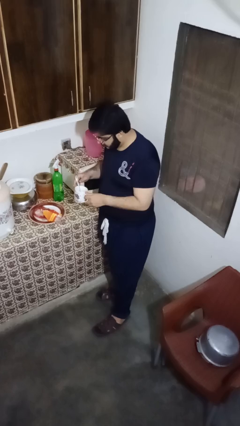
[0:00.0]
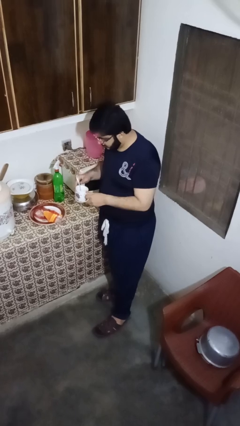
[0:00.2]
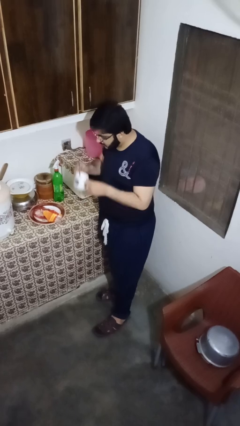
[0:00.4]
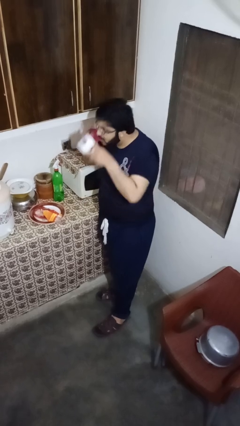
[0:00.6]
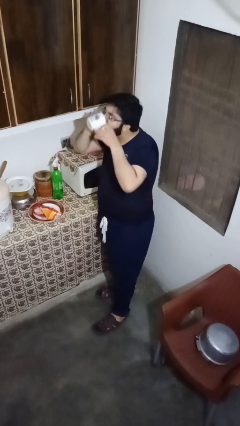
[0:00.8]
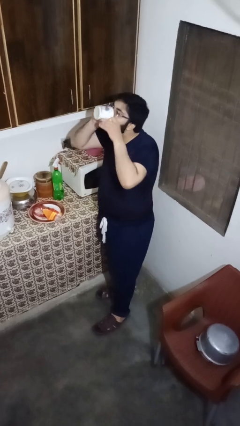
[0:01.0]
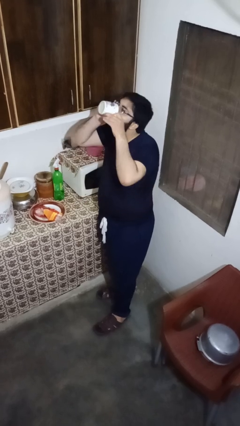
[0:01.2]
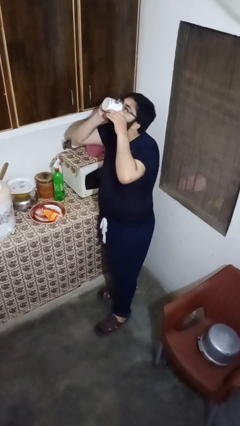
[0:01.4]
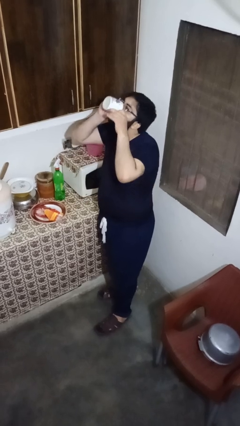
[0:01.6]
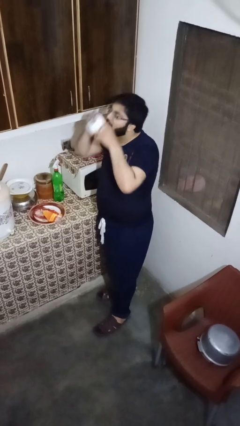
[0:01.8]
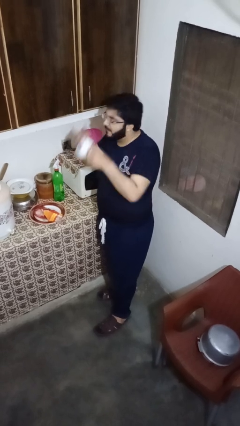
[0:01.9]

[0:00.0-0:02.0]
person drinks from mug

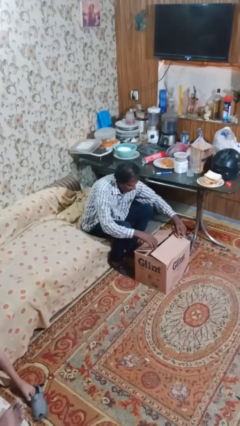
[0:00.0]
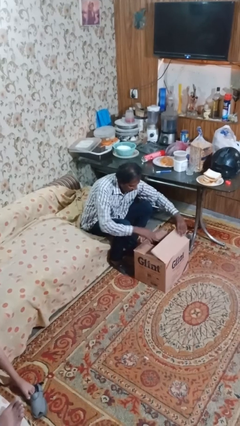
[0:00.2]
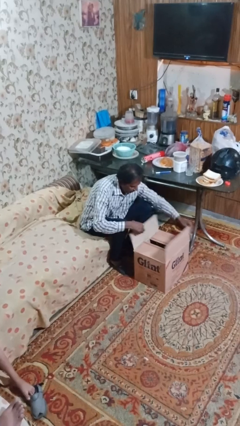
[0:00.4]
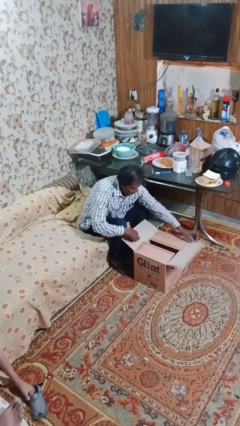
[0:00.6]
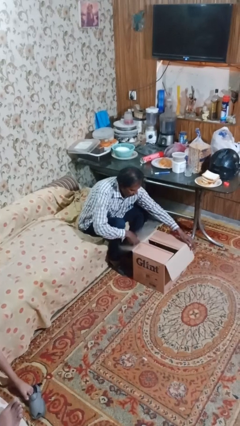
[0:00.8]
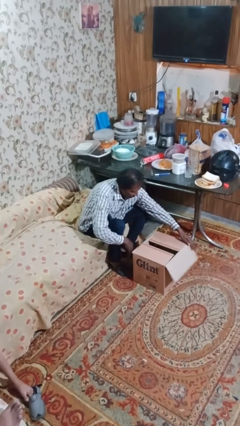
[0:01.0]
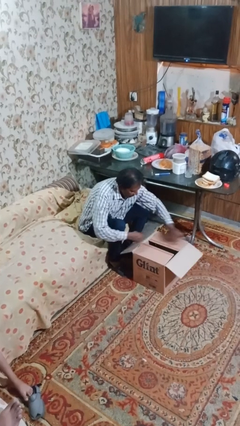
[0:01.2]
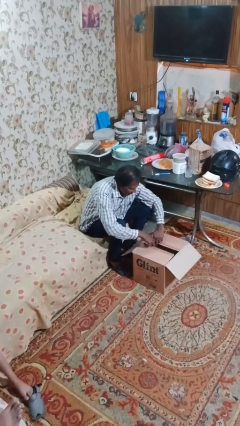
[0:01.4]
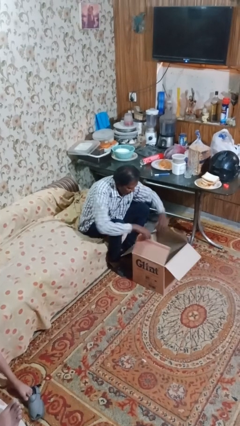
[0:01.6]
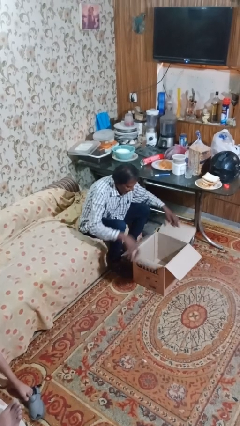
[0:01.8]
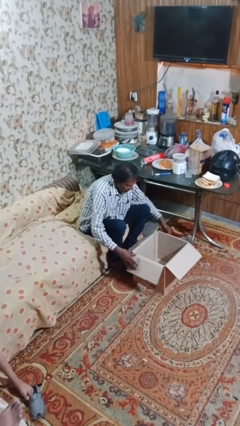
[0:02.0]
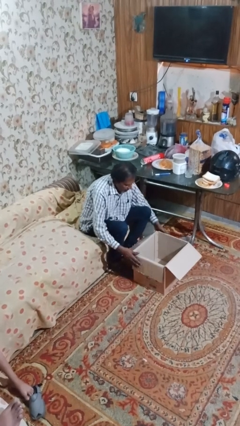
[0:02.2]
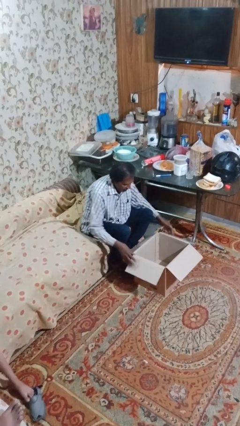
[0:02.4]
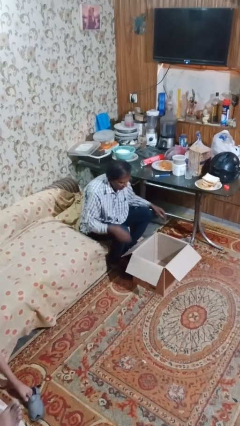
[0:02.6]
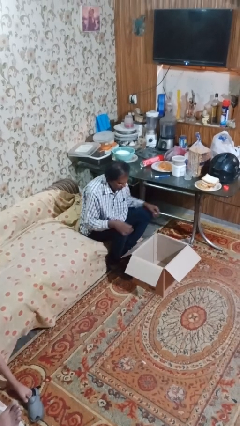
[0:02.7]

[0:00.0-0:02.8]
person opens box

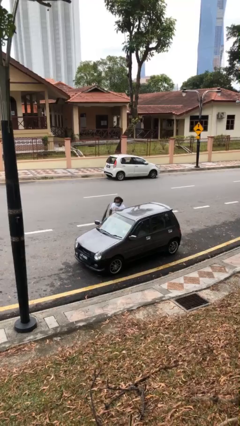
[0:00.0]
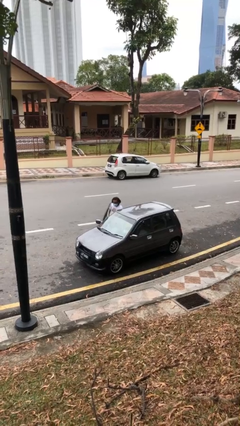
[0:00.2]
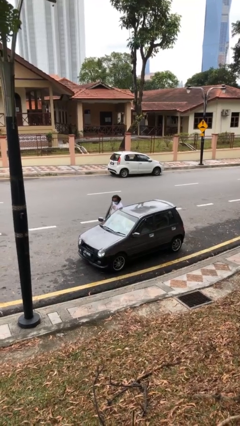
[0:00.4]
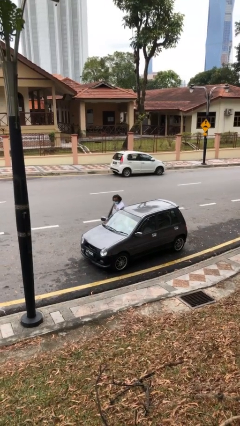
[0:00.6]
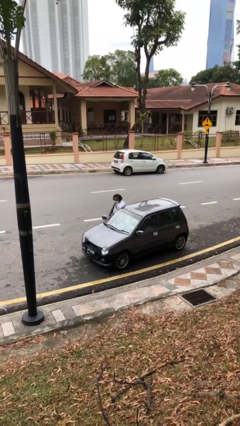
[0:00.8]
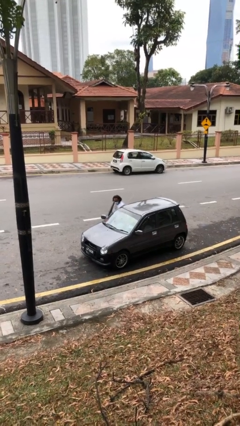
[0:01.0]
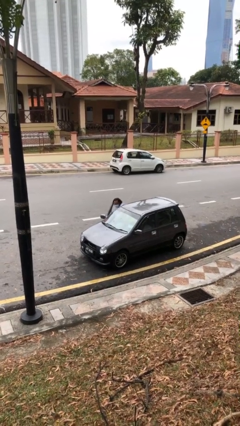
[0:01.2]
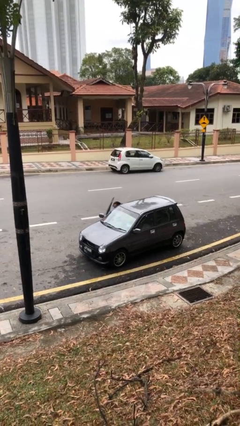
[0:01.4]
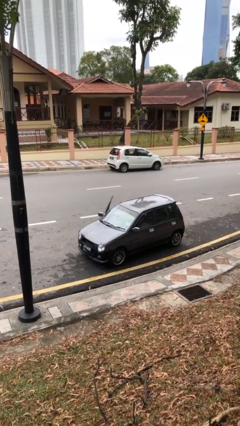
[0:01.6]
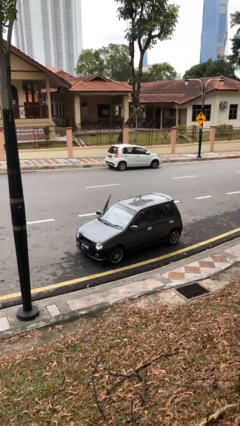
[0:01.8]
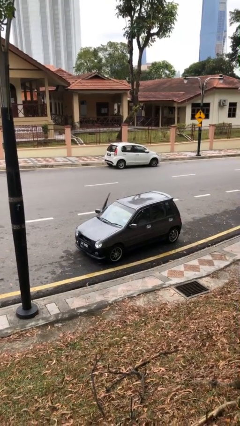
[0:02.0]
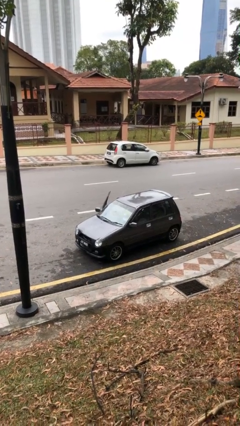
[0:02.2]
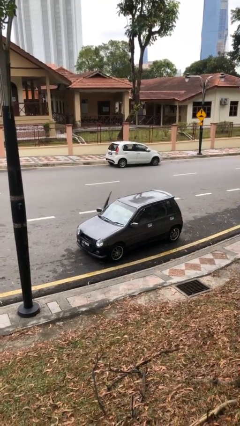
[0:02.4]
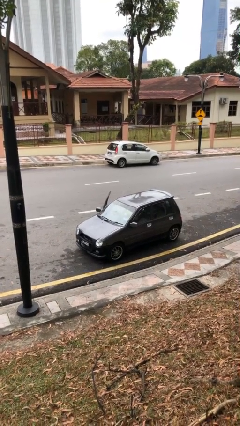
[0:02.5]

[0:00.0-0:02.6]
person enters car

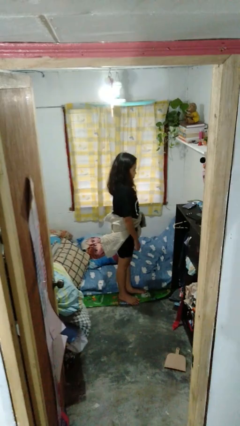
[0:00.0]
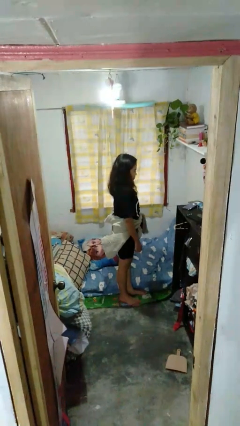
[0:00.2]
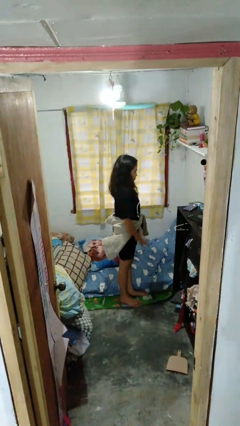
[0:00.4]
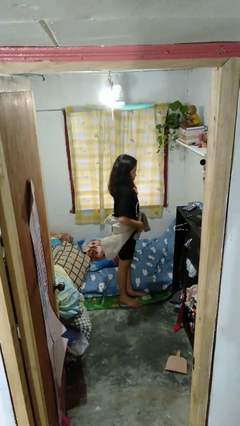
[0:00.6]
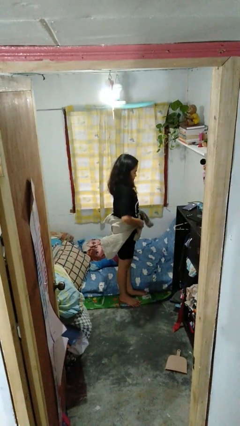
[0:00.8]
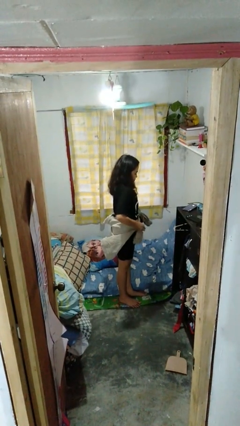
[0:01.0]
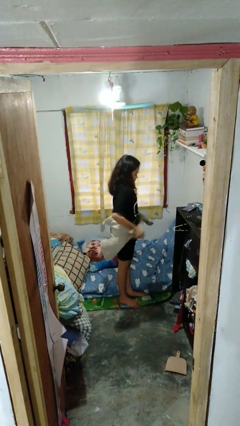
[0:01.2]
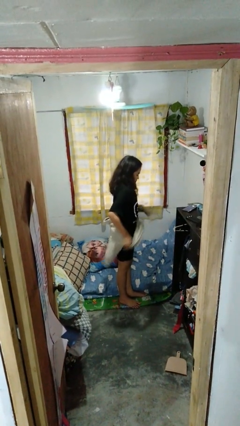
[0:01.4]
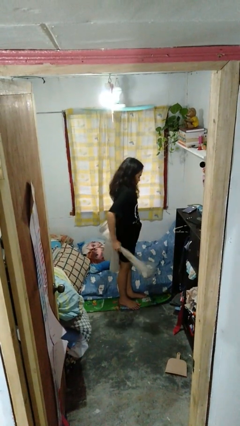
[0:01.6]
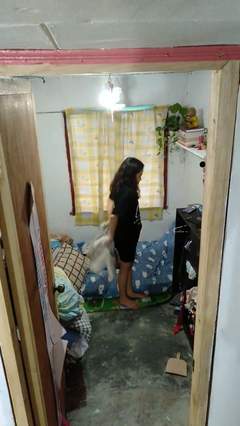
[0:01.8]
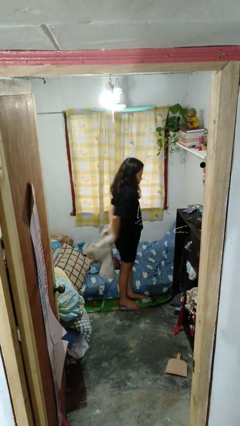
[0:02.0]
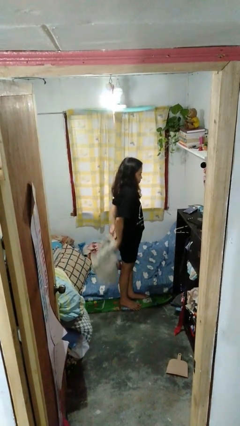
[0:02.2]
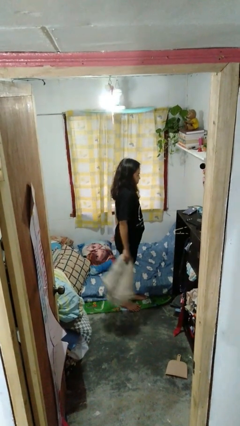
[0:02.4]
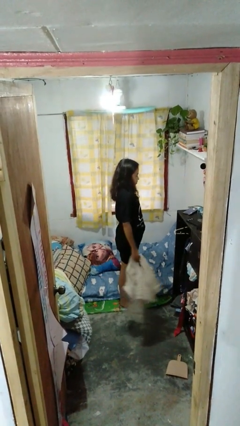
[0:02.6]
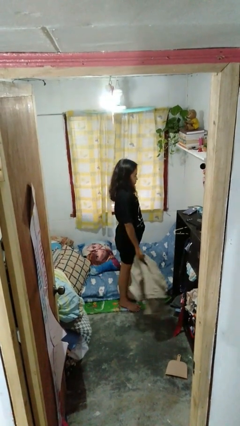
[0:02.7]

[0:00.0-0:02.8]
person unties jacket around waist

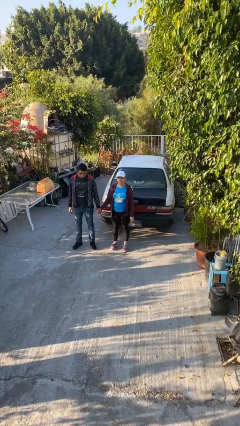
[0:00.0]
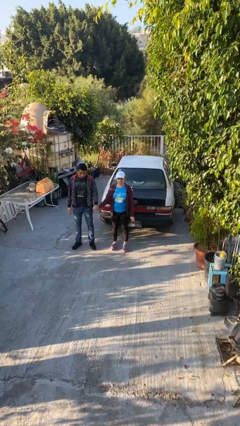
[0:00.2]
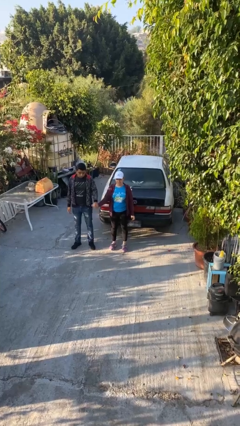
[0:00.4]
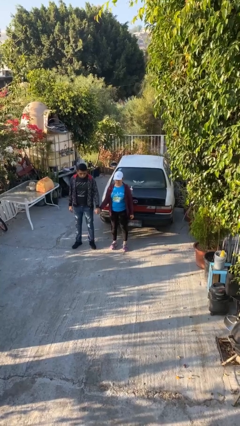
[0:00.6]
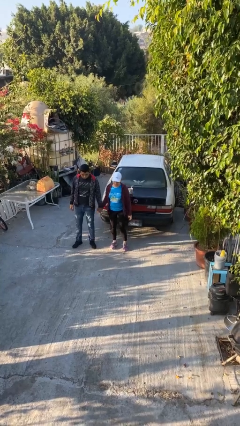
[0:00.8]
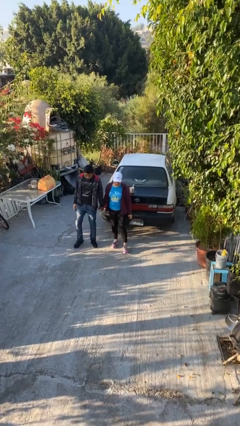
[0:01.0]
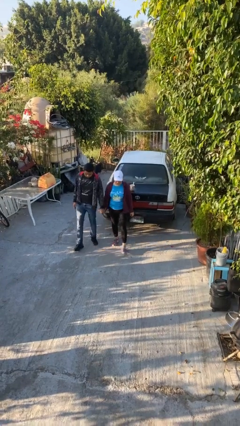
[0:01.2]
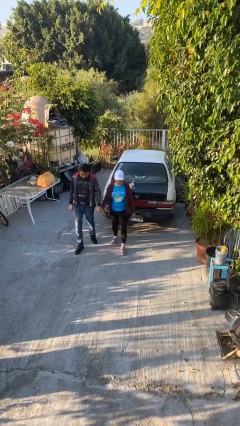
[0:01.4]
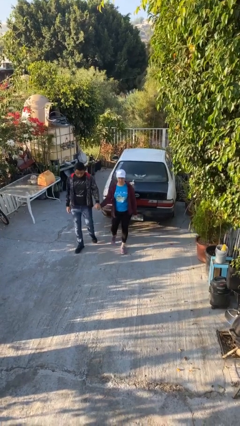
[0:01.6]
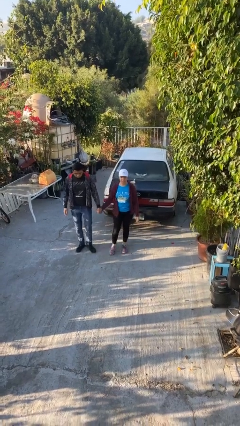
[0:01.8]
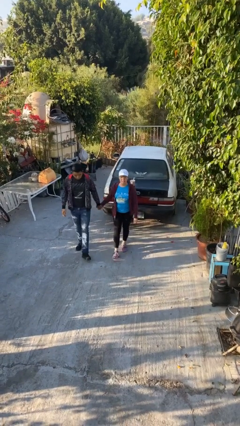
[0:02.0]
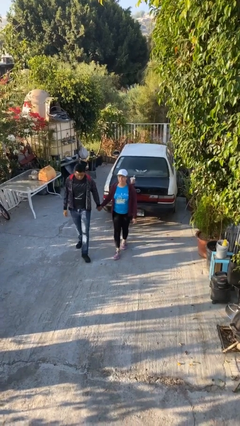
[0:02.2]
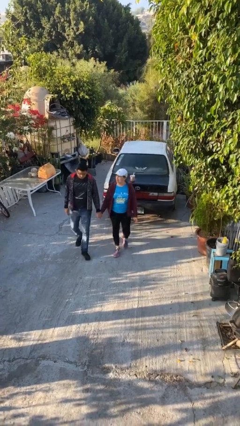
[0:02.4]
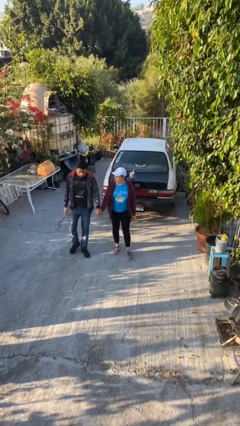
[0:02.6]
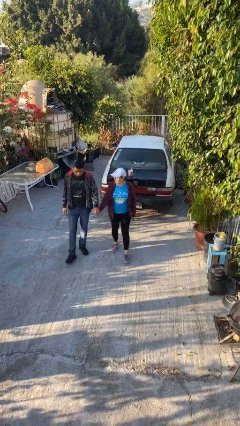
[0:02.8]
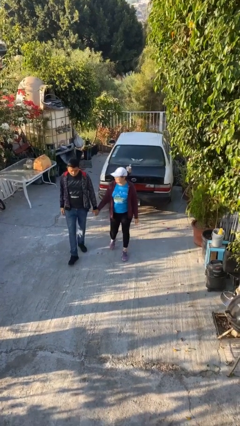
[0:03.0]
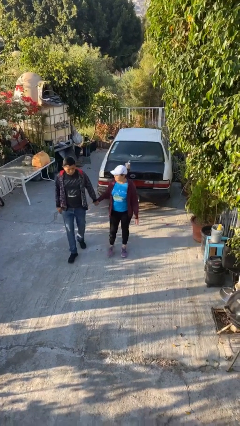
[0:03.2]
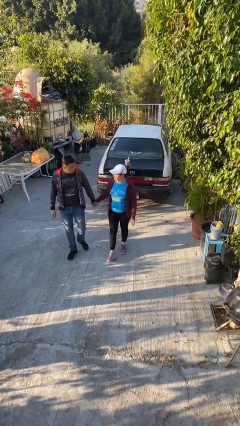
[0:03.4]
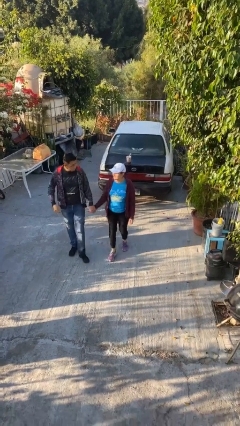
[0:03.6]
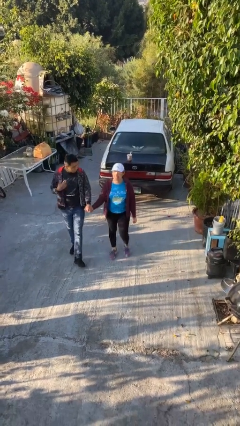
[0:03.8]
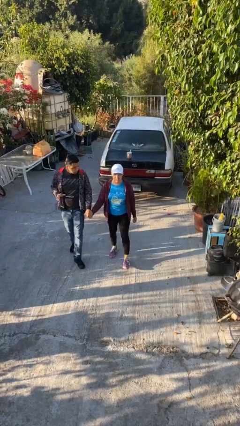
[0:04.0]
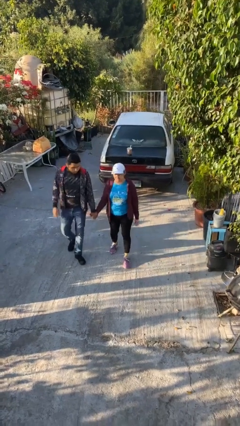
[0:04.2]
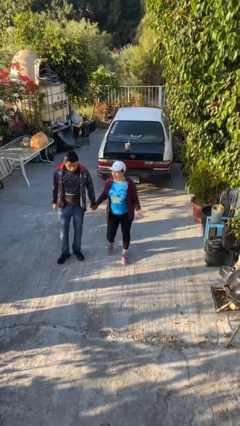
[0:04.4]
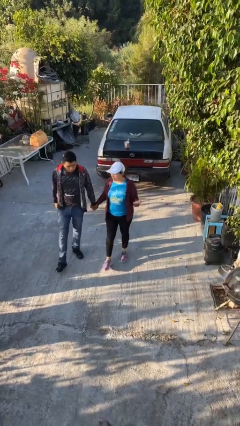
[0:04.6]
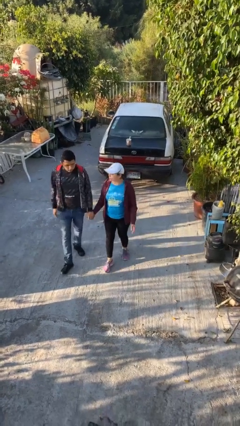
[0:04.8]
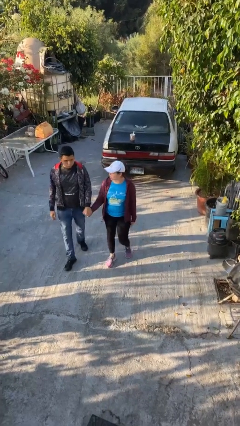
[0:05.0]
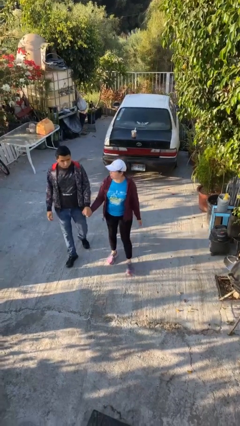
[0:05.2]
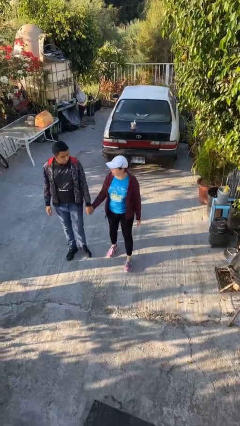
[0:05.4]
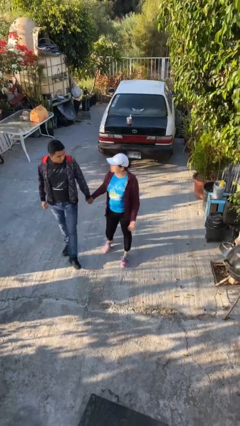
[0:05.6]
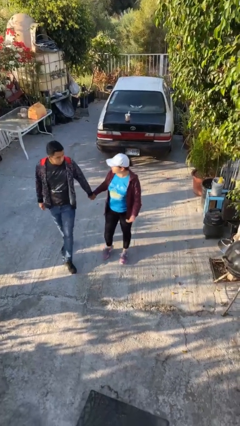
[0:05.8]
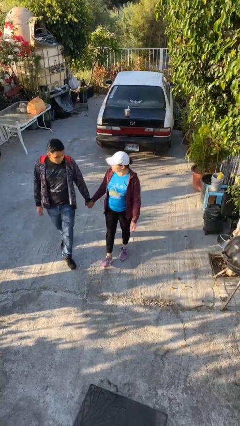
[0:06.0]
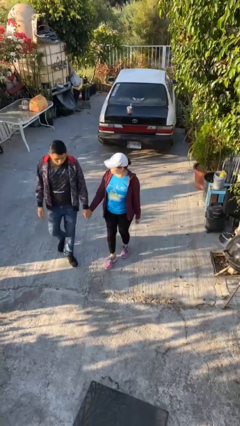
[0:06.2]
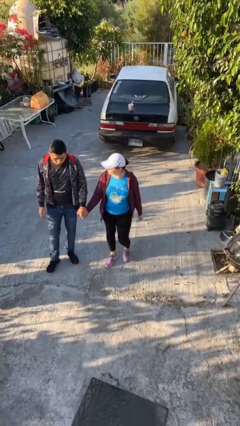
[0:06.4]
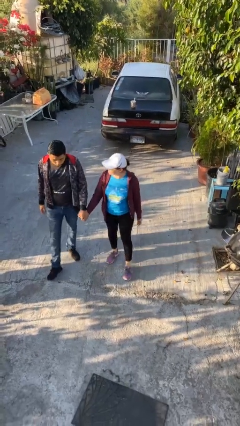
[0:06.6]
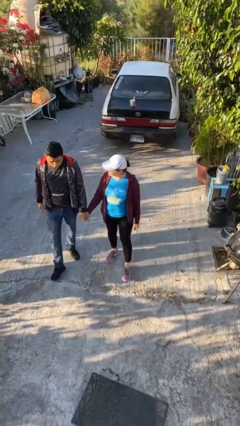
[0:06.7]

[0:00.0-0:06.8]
person holds hand

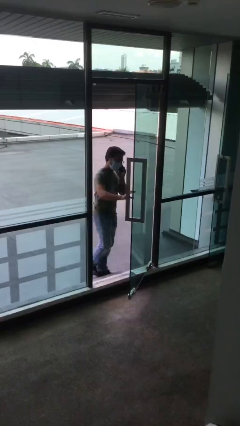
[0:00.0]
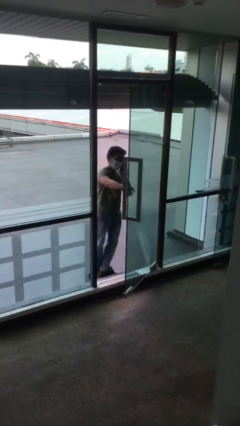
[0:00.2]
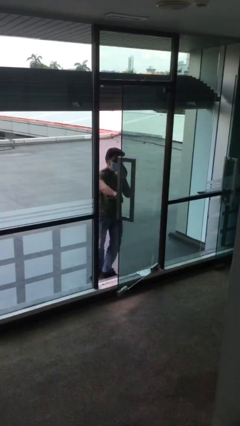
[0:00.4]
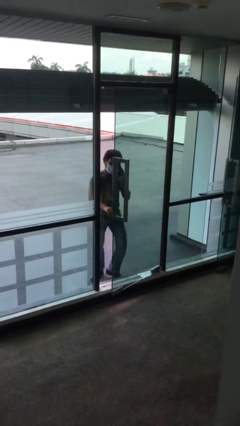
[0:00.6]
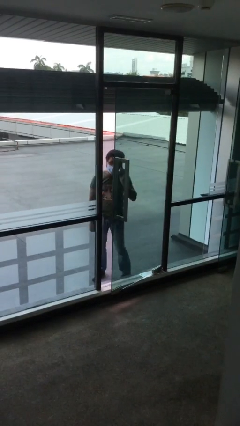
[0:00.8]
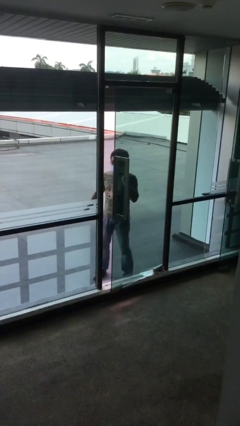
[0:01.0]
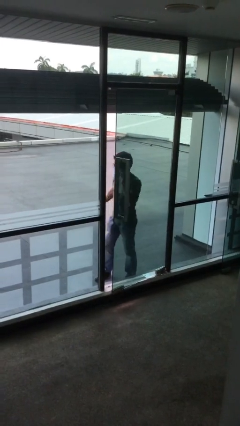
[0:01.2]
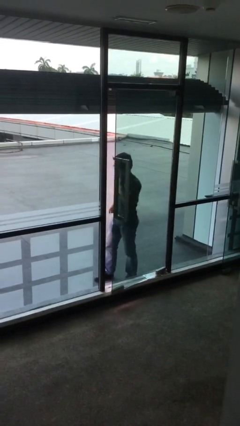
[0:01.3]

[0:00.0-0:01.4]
person closes facility door
